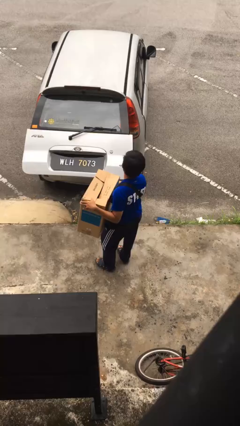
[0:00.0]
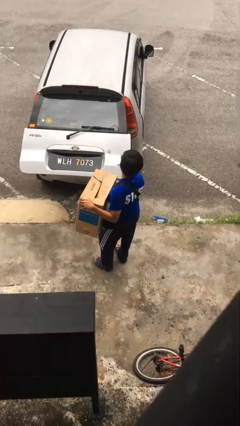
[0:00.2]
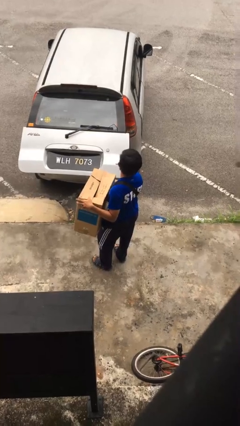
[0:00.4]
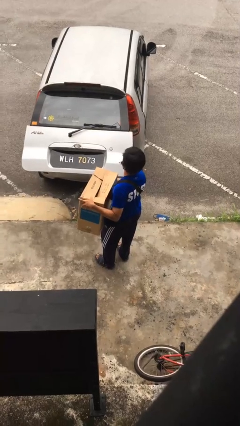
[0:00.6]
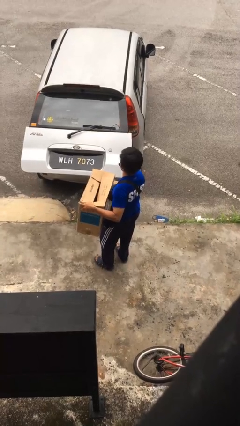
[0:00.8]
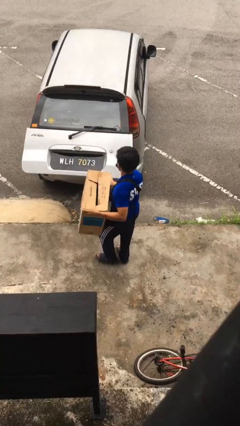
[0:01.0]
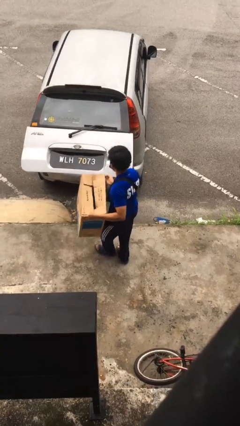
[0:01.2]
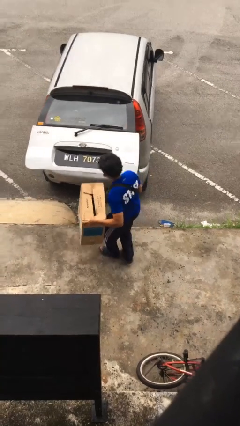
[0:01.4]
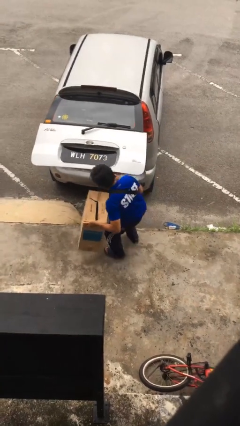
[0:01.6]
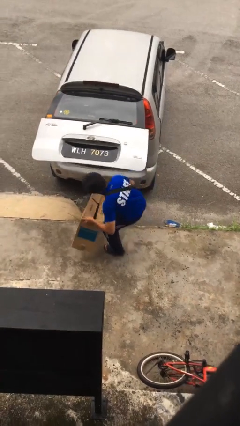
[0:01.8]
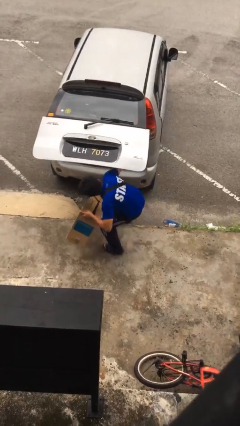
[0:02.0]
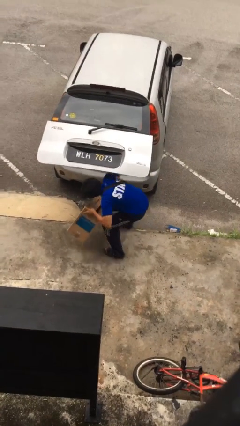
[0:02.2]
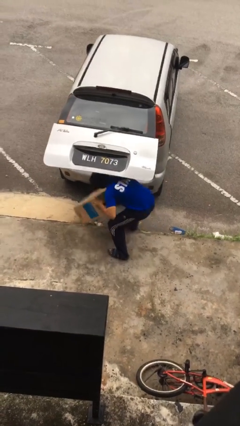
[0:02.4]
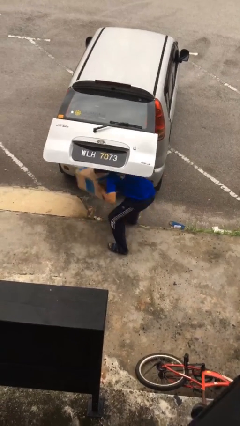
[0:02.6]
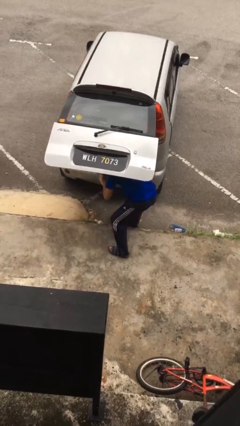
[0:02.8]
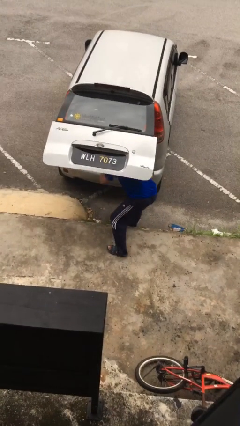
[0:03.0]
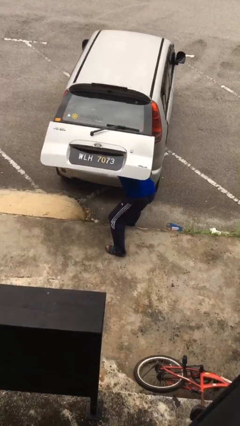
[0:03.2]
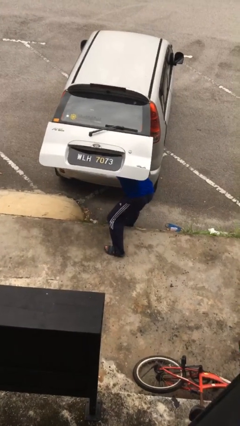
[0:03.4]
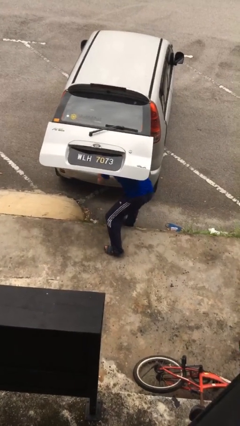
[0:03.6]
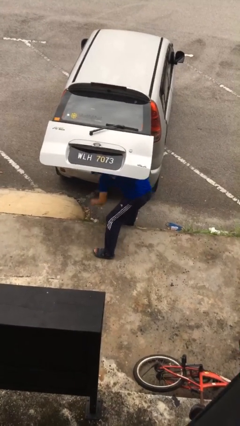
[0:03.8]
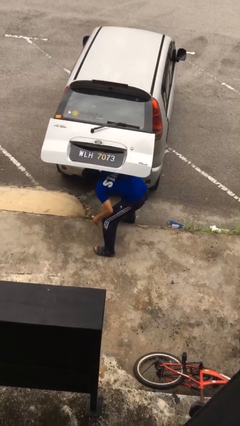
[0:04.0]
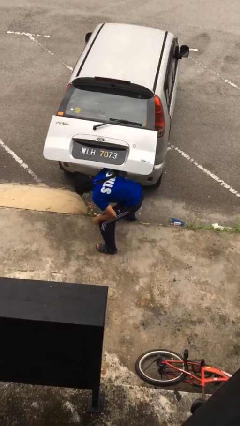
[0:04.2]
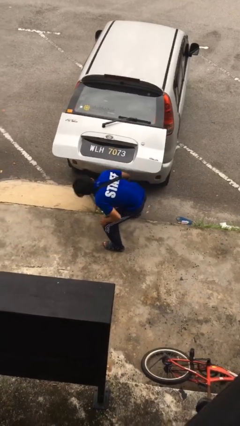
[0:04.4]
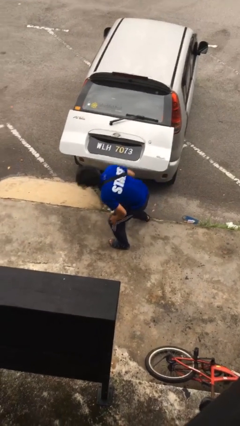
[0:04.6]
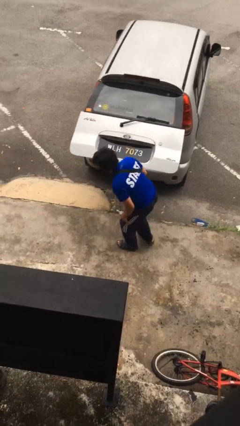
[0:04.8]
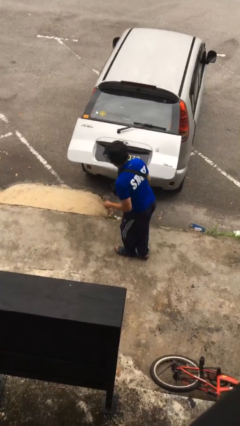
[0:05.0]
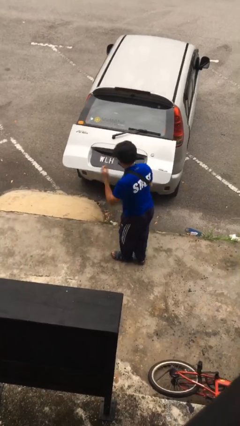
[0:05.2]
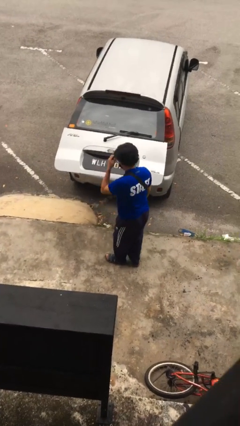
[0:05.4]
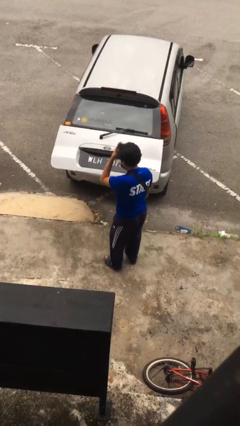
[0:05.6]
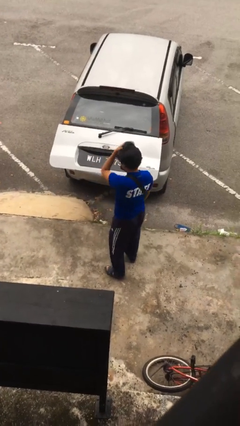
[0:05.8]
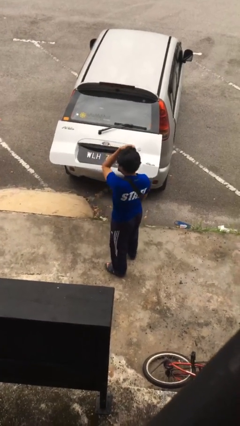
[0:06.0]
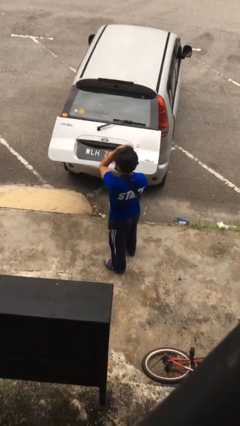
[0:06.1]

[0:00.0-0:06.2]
person loads car

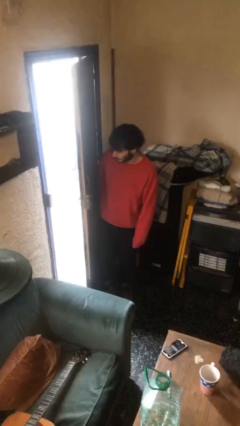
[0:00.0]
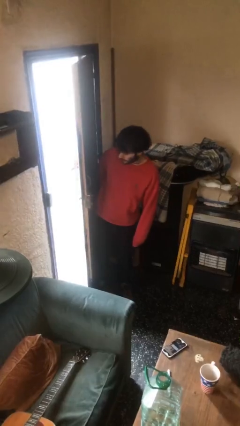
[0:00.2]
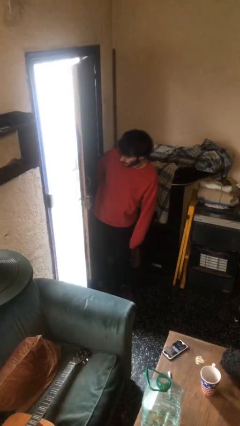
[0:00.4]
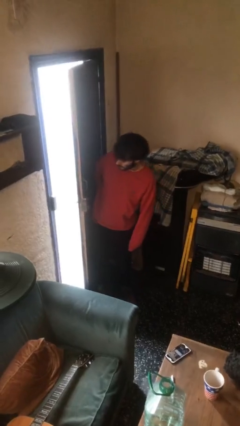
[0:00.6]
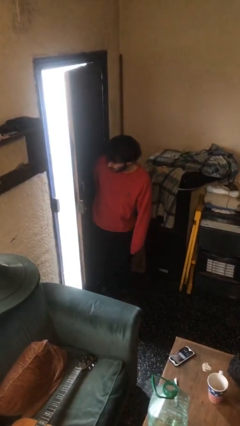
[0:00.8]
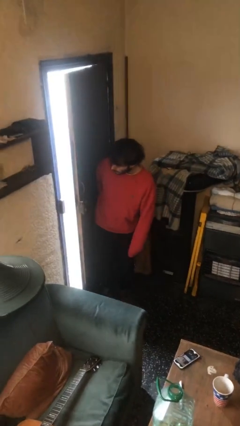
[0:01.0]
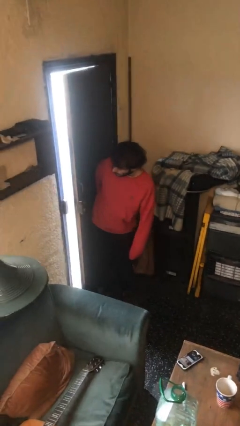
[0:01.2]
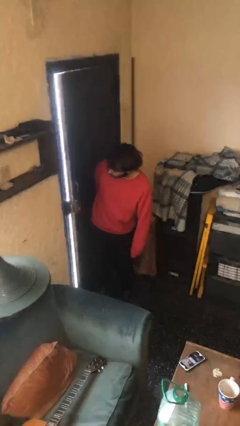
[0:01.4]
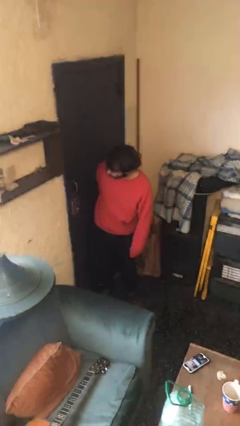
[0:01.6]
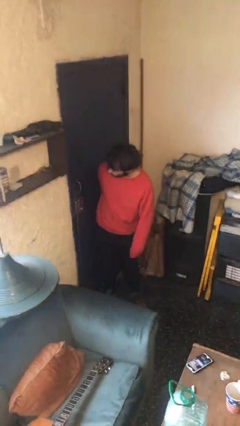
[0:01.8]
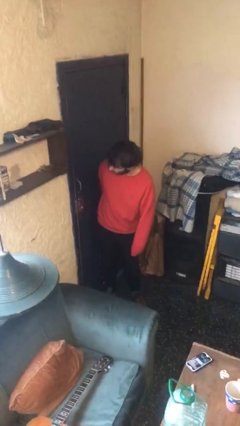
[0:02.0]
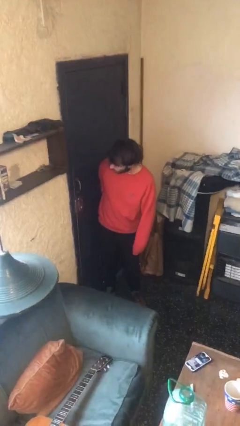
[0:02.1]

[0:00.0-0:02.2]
person closes door with hip

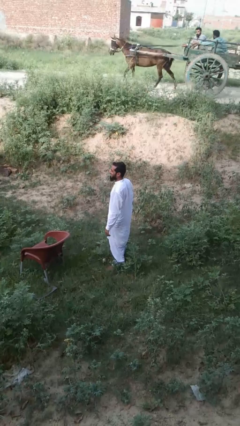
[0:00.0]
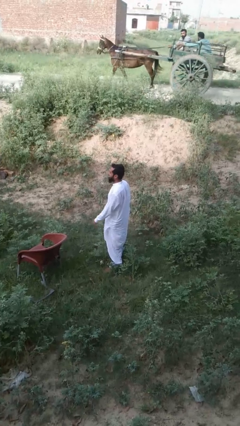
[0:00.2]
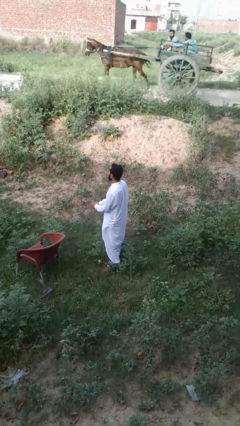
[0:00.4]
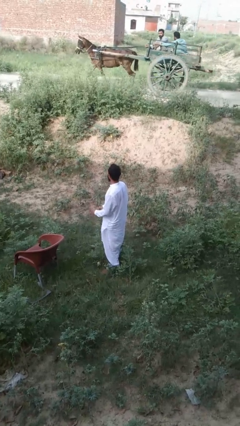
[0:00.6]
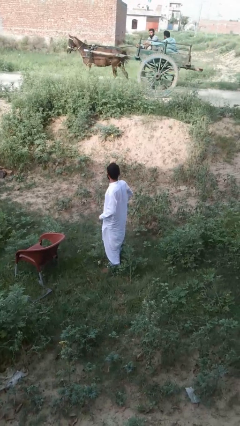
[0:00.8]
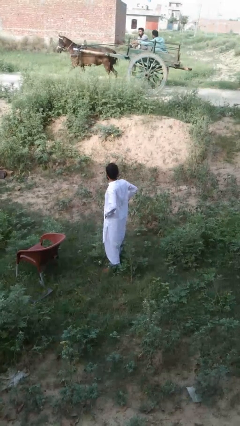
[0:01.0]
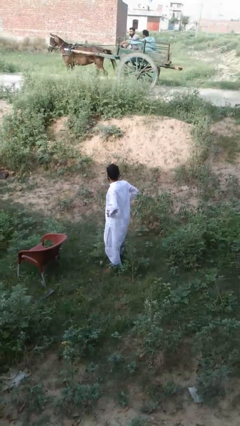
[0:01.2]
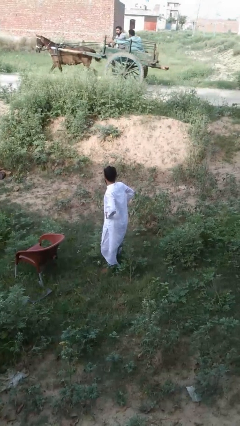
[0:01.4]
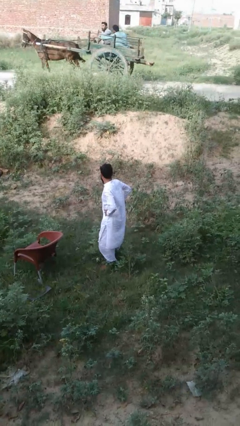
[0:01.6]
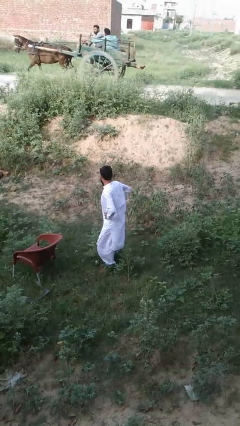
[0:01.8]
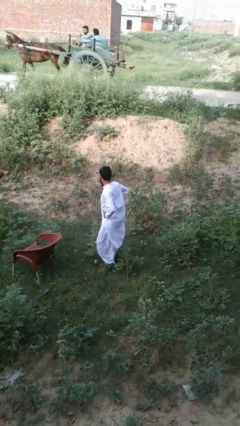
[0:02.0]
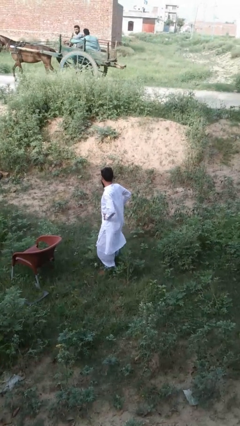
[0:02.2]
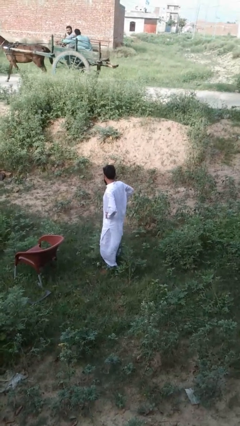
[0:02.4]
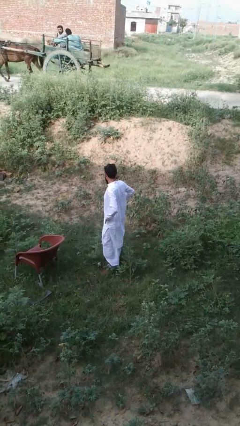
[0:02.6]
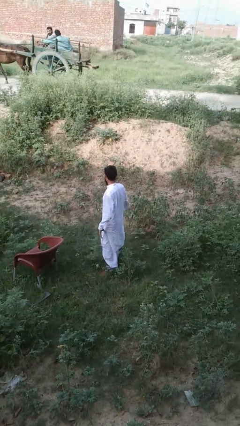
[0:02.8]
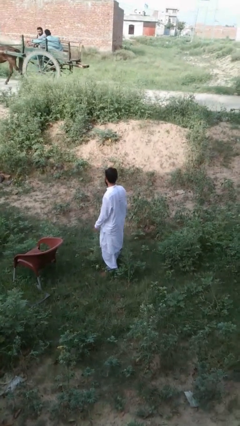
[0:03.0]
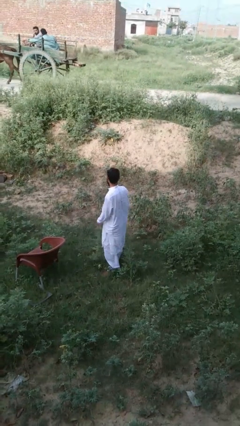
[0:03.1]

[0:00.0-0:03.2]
person wiggles hips

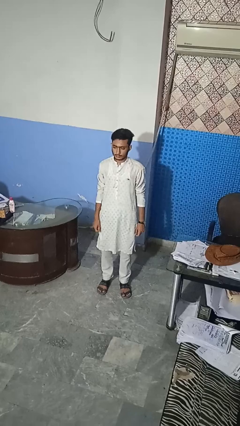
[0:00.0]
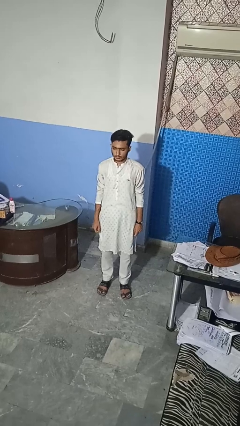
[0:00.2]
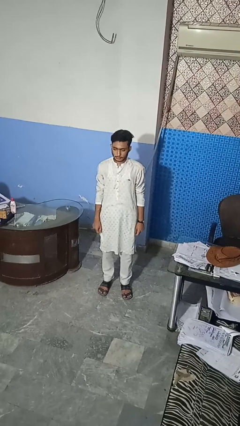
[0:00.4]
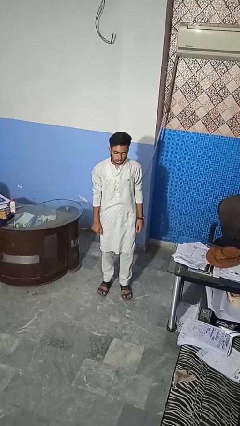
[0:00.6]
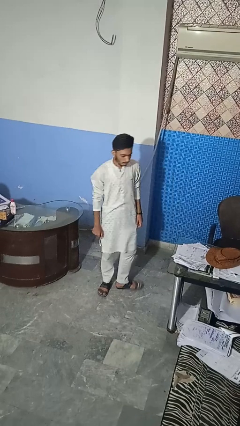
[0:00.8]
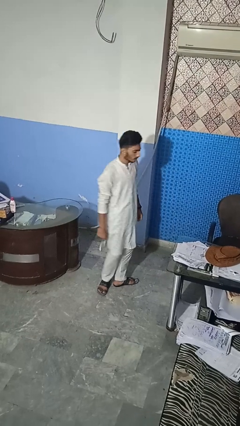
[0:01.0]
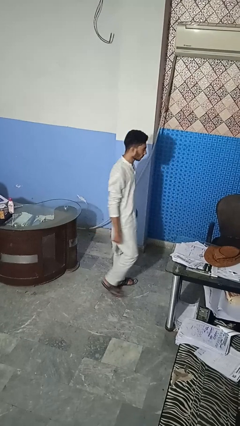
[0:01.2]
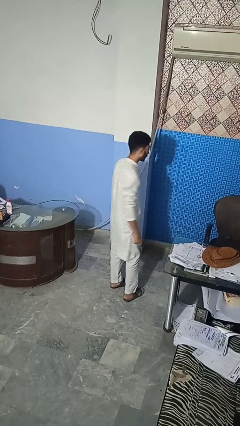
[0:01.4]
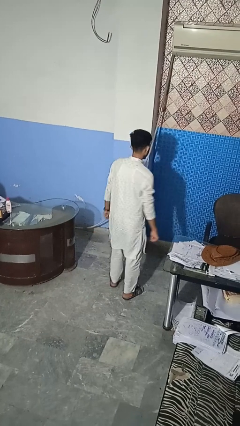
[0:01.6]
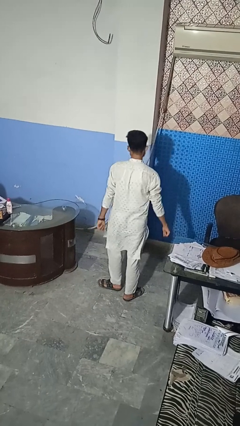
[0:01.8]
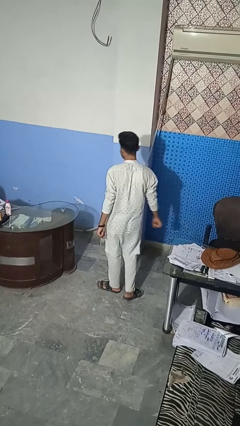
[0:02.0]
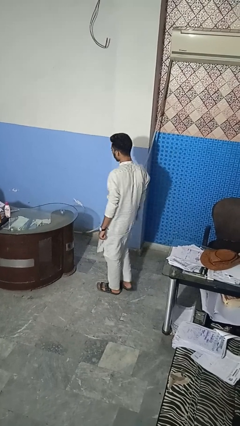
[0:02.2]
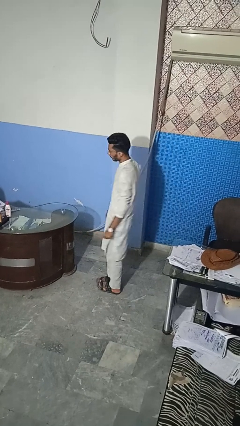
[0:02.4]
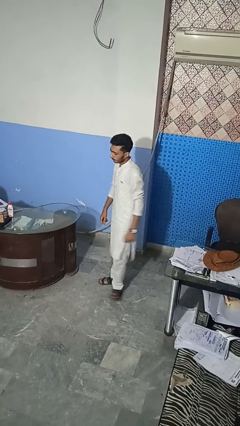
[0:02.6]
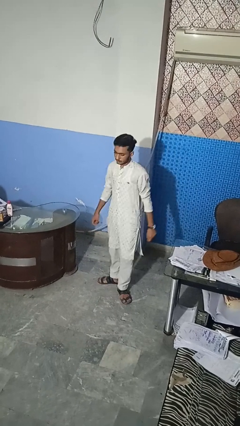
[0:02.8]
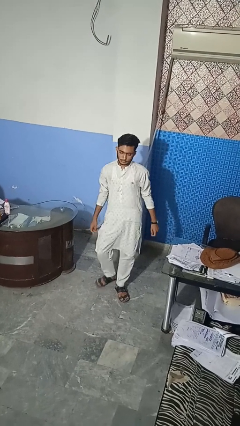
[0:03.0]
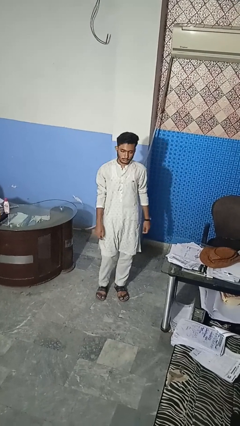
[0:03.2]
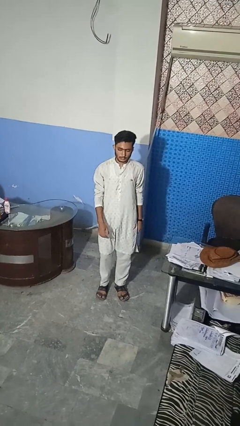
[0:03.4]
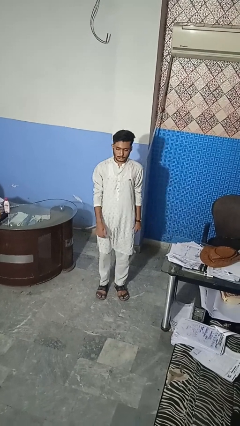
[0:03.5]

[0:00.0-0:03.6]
person twirls

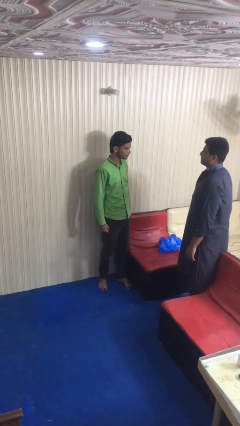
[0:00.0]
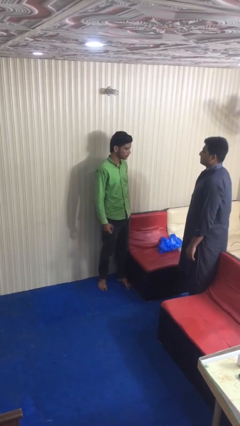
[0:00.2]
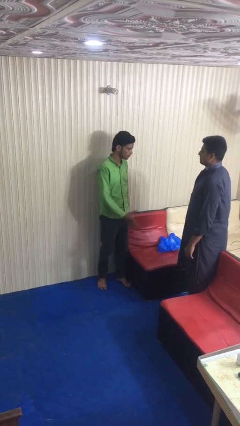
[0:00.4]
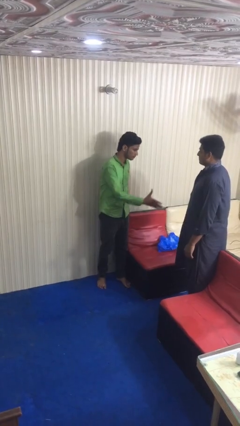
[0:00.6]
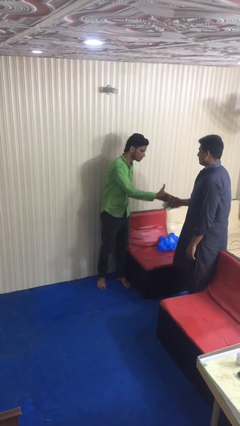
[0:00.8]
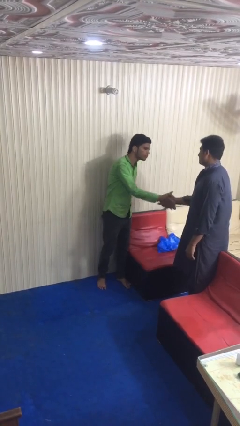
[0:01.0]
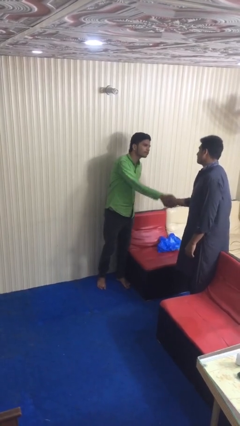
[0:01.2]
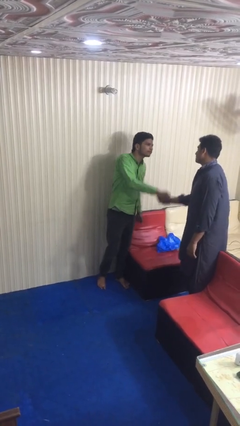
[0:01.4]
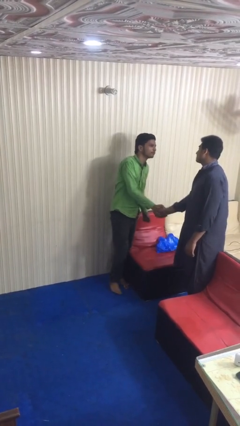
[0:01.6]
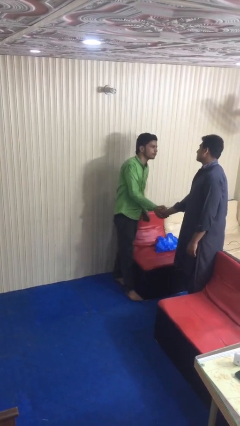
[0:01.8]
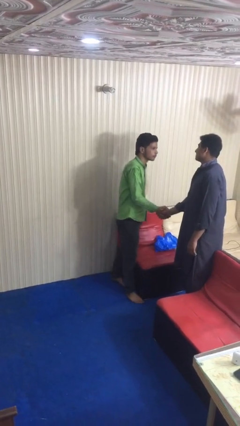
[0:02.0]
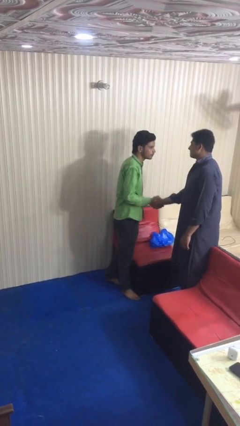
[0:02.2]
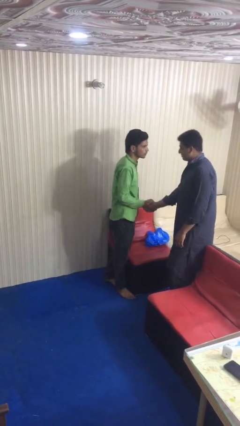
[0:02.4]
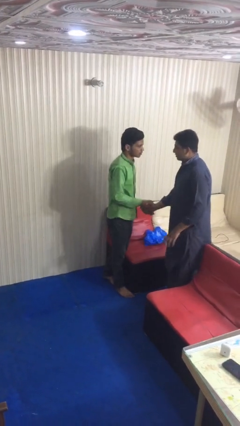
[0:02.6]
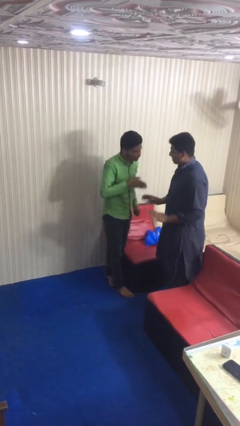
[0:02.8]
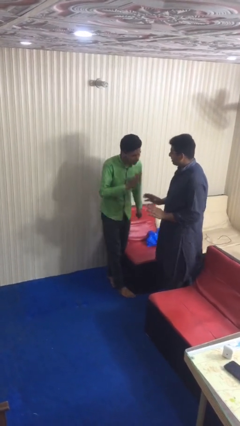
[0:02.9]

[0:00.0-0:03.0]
person shakes hand

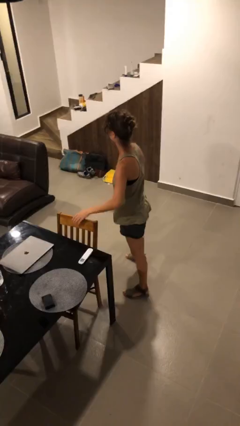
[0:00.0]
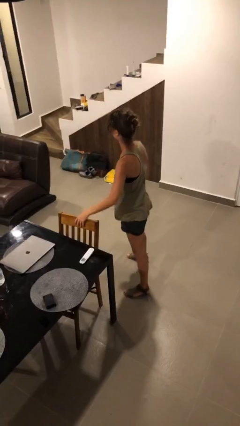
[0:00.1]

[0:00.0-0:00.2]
person sits down
